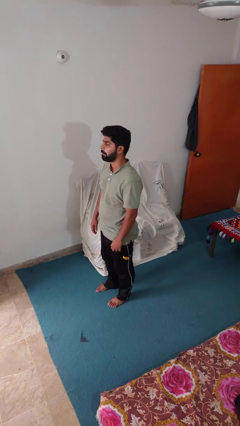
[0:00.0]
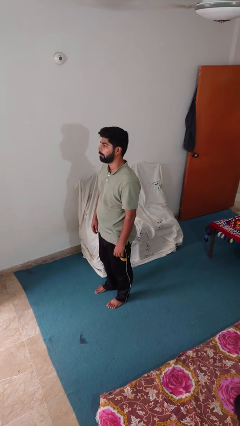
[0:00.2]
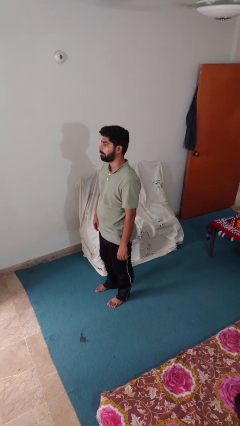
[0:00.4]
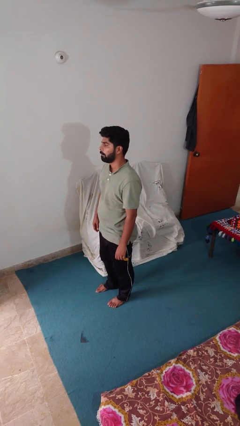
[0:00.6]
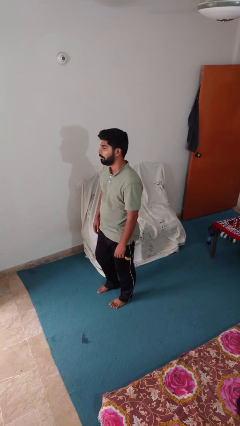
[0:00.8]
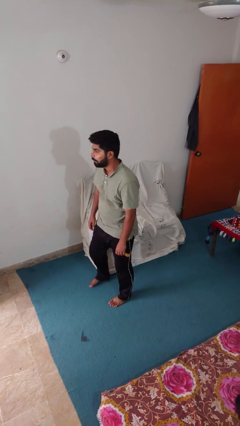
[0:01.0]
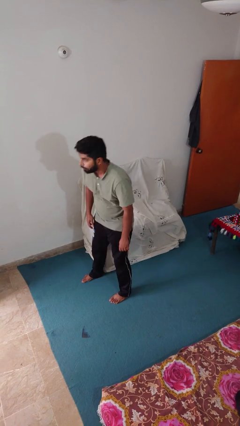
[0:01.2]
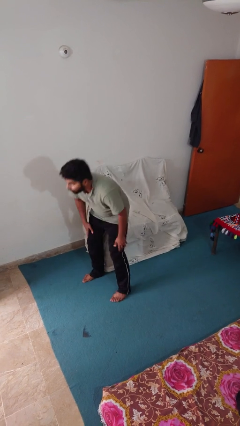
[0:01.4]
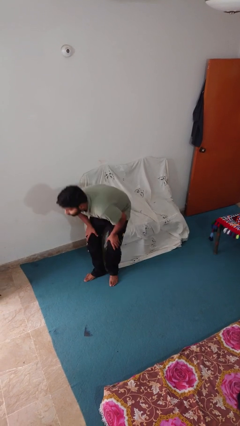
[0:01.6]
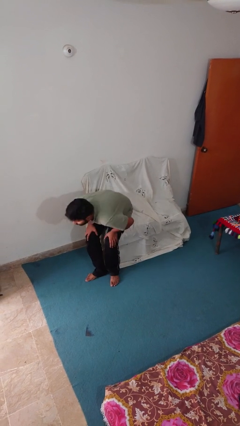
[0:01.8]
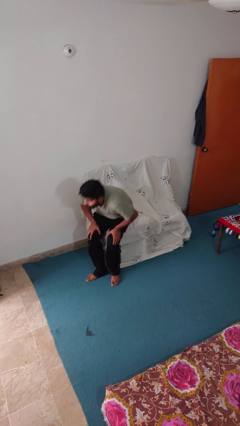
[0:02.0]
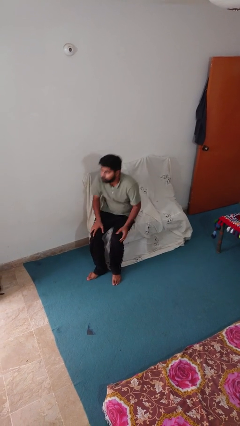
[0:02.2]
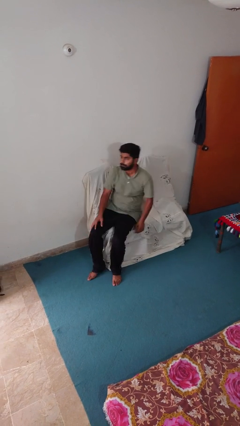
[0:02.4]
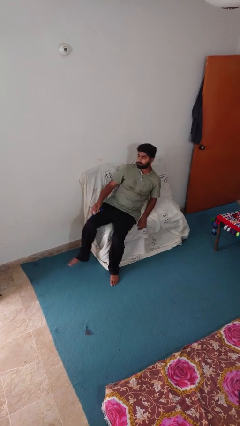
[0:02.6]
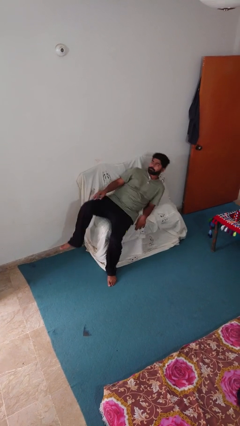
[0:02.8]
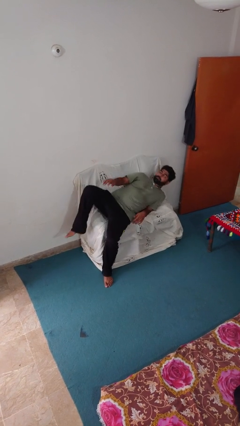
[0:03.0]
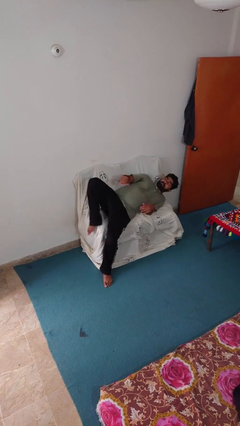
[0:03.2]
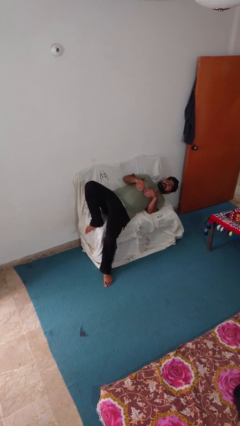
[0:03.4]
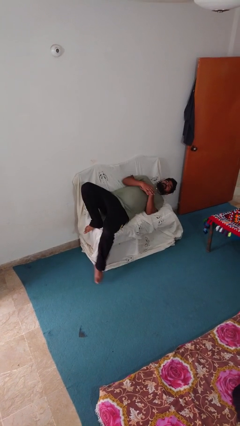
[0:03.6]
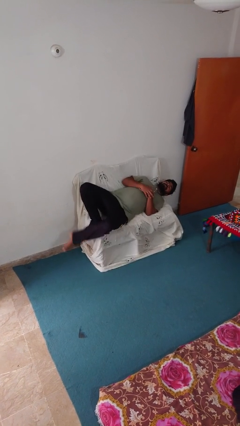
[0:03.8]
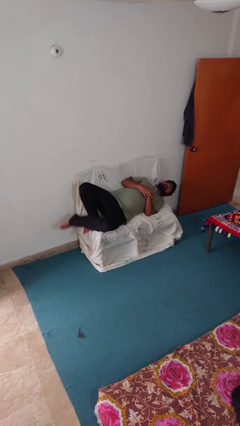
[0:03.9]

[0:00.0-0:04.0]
person lies down on couch

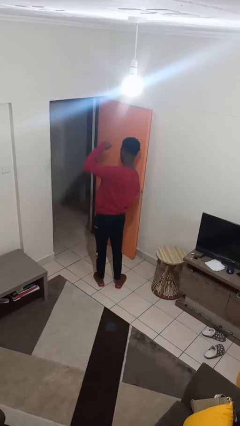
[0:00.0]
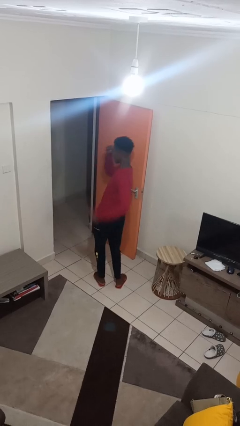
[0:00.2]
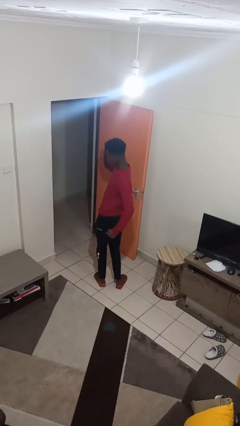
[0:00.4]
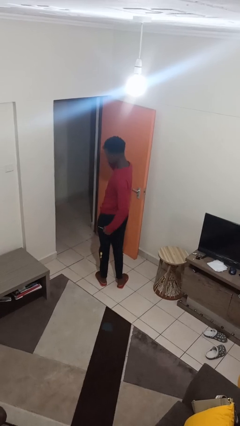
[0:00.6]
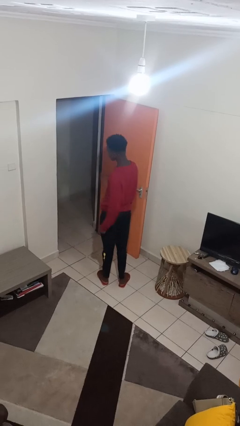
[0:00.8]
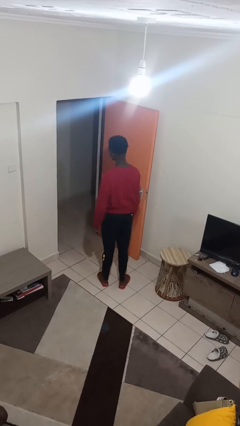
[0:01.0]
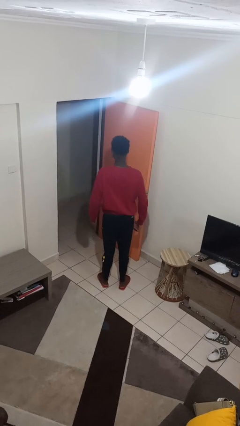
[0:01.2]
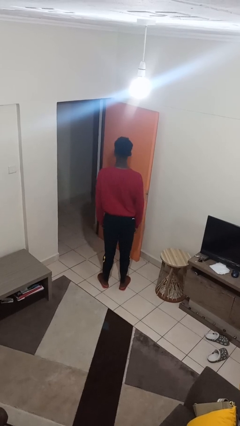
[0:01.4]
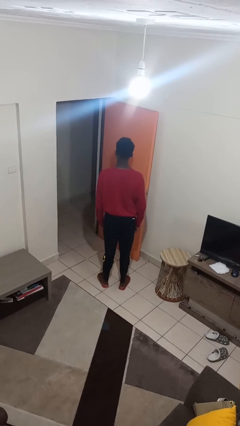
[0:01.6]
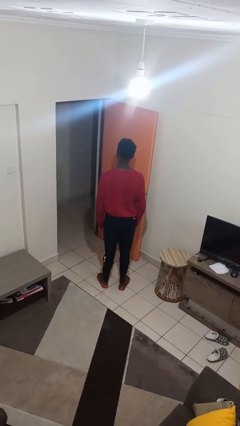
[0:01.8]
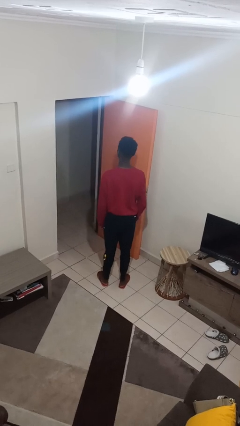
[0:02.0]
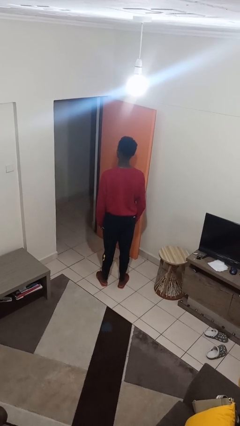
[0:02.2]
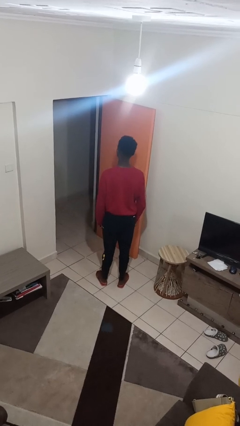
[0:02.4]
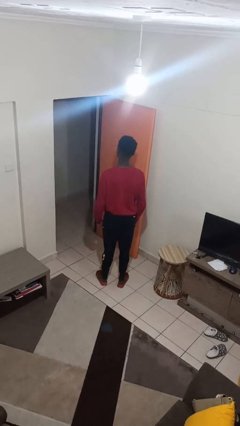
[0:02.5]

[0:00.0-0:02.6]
person punches

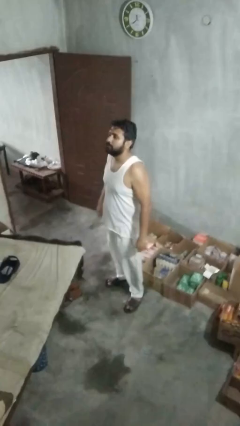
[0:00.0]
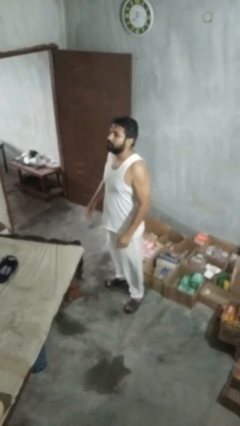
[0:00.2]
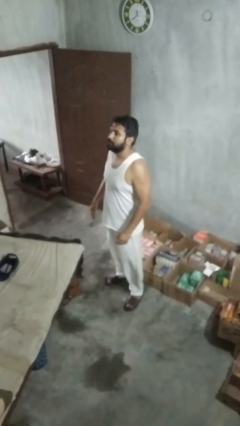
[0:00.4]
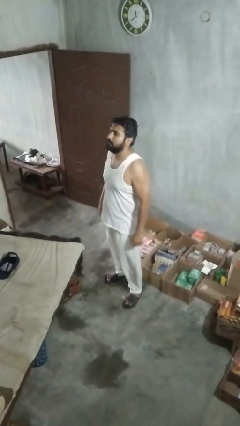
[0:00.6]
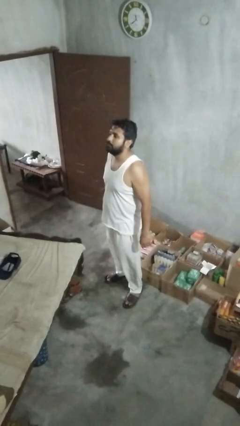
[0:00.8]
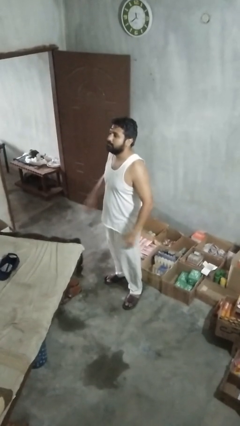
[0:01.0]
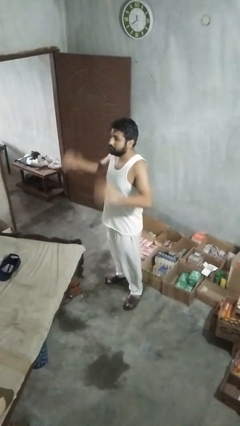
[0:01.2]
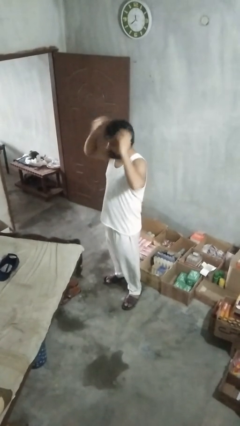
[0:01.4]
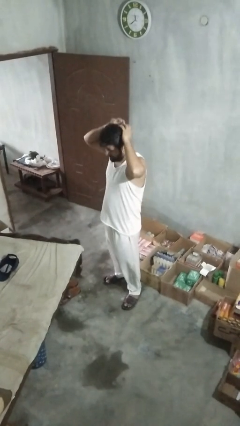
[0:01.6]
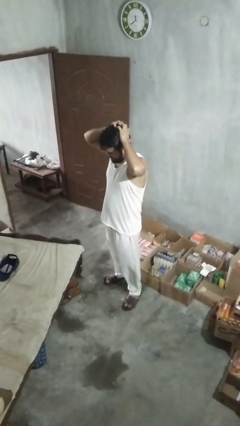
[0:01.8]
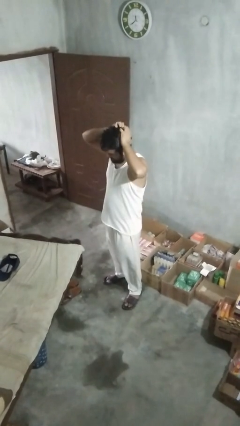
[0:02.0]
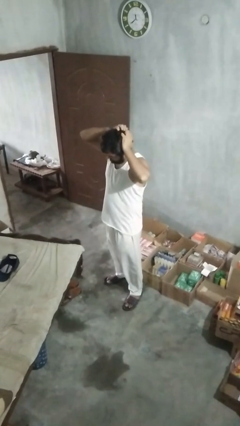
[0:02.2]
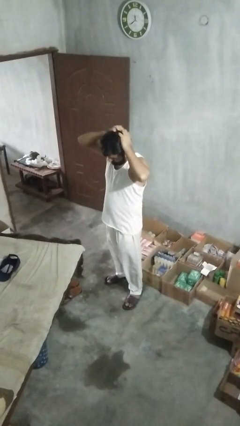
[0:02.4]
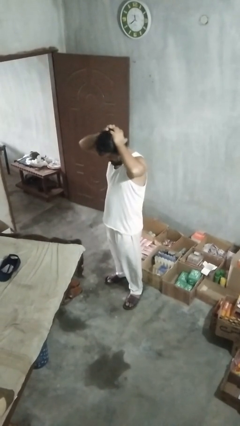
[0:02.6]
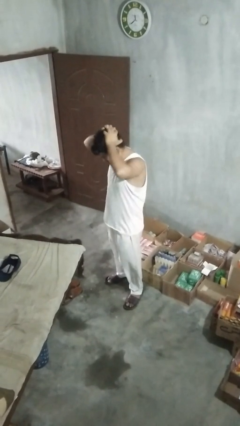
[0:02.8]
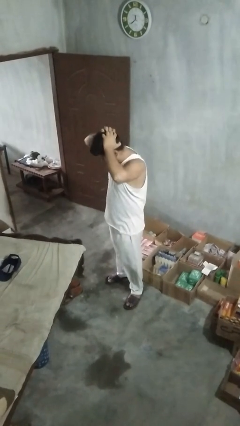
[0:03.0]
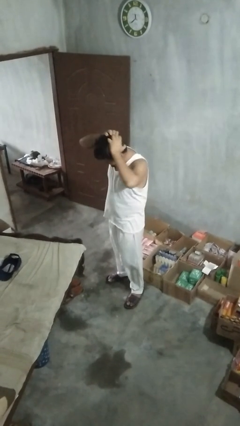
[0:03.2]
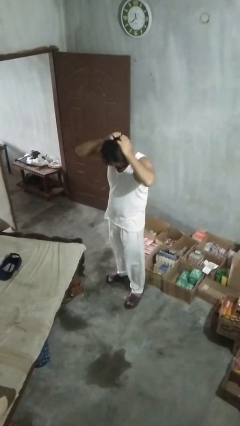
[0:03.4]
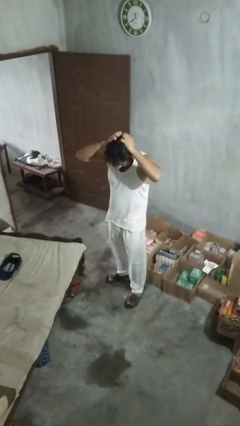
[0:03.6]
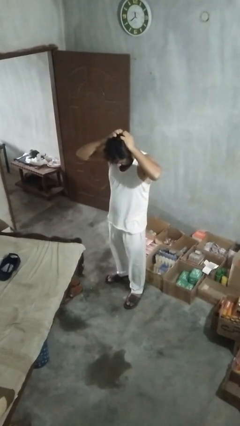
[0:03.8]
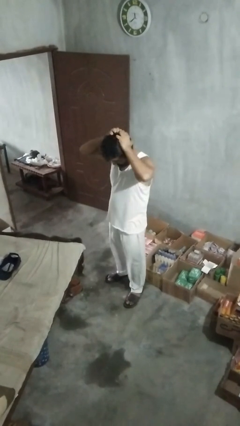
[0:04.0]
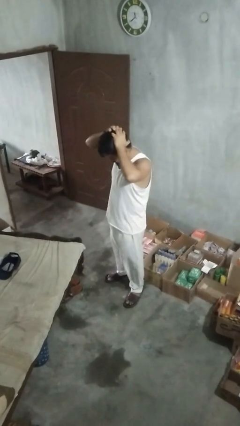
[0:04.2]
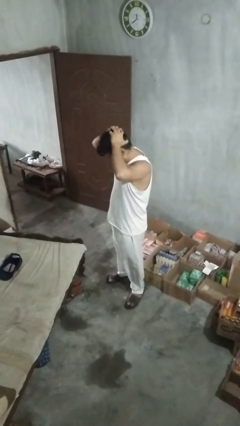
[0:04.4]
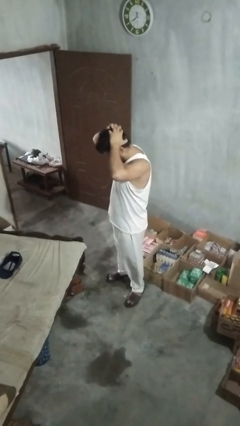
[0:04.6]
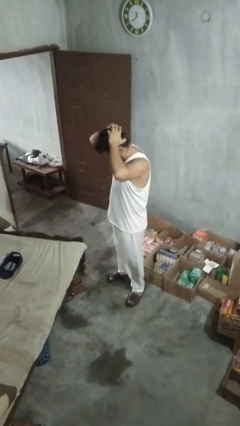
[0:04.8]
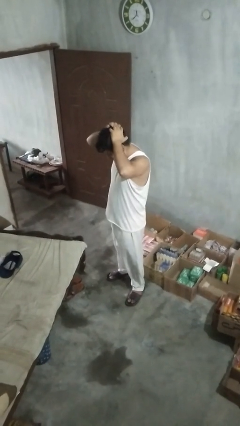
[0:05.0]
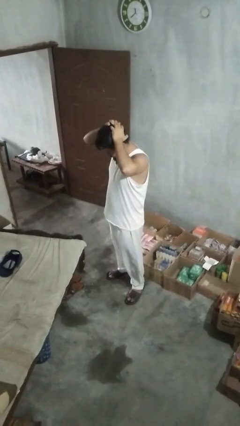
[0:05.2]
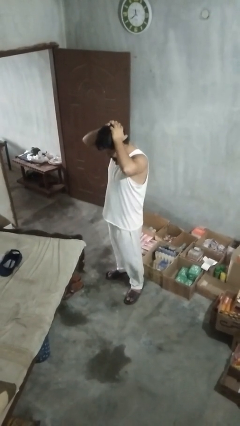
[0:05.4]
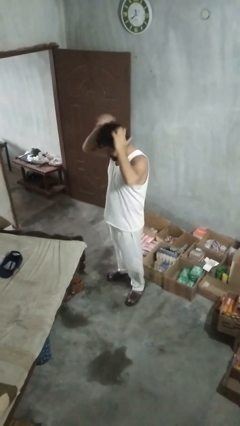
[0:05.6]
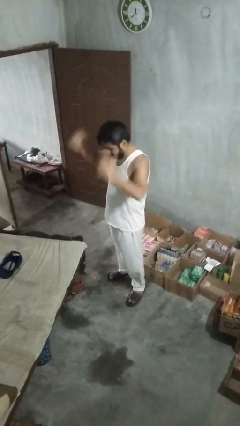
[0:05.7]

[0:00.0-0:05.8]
person scratches face

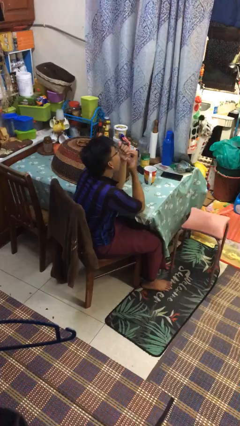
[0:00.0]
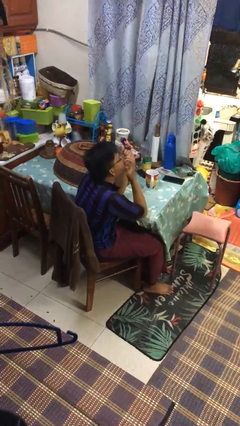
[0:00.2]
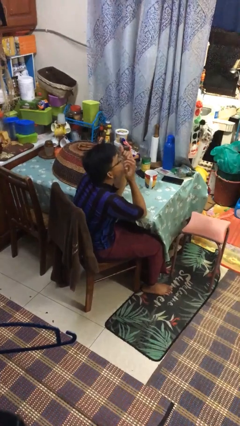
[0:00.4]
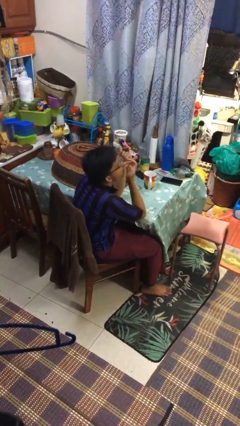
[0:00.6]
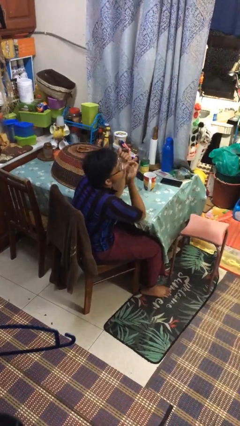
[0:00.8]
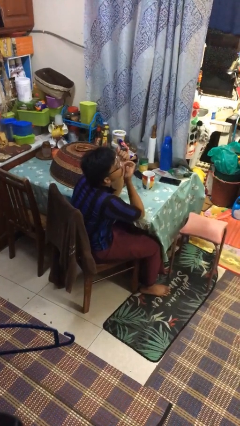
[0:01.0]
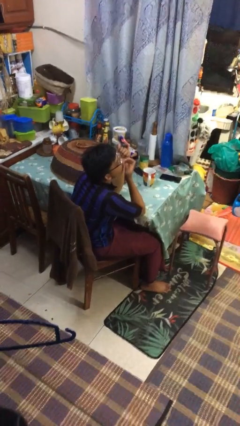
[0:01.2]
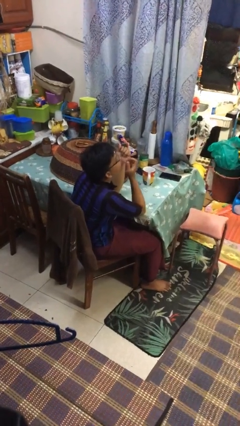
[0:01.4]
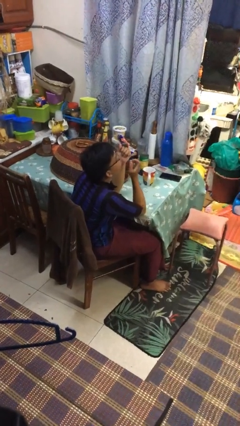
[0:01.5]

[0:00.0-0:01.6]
person licks fingers

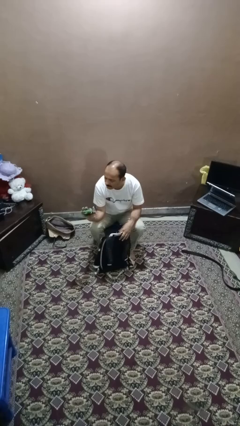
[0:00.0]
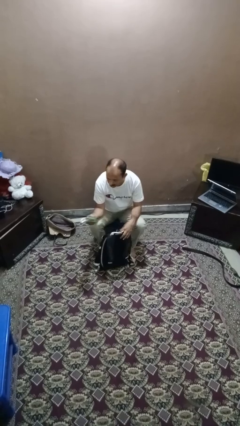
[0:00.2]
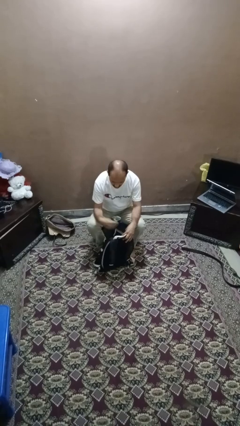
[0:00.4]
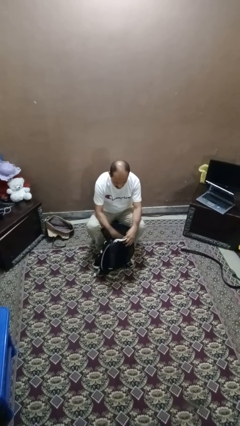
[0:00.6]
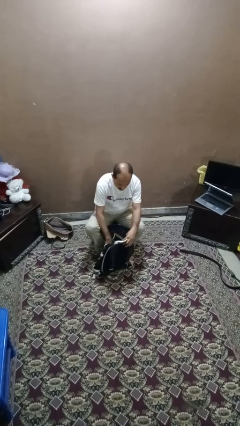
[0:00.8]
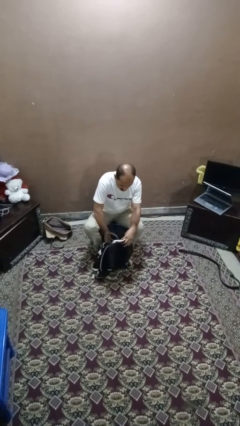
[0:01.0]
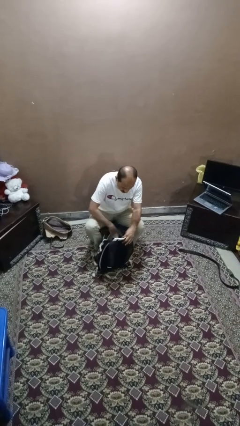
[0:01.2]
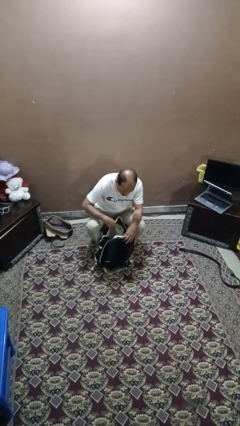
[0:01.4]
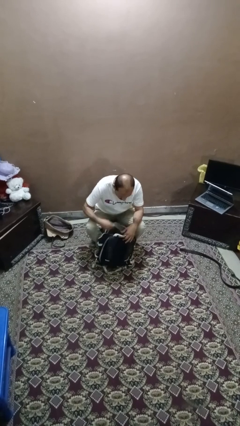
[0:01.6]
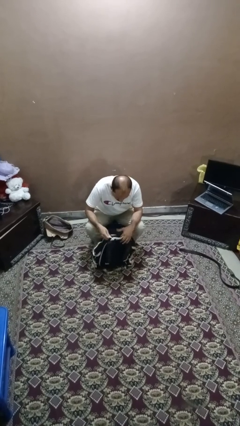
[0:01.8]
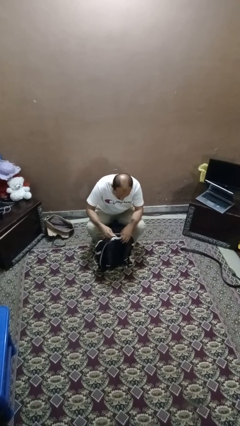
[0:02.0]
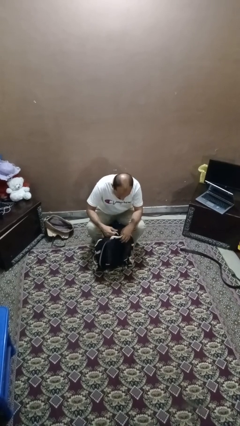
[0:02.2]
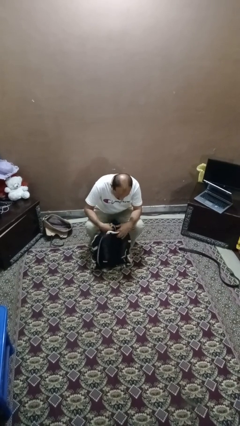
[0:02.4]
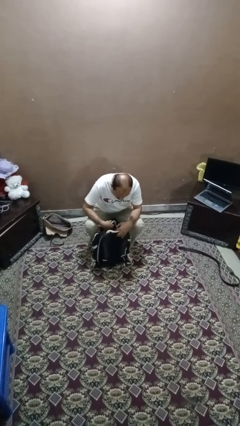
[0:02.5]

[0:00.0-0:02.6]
person puts object into backpack

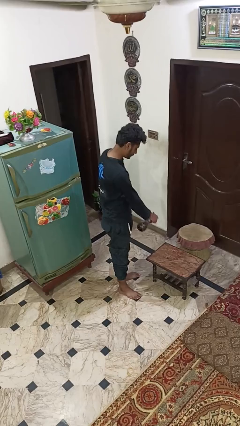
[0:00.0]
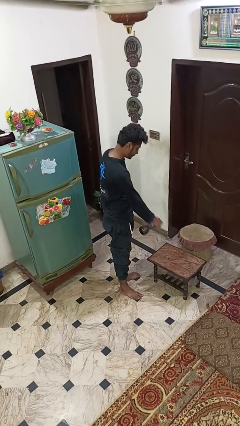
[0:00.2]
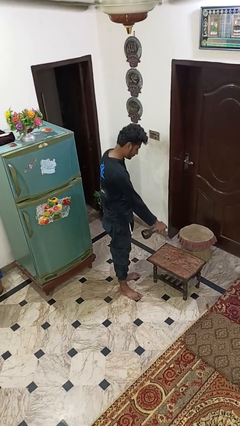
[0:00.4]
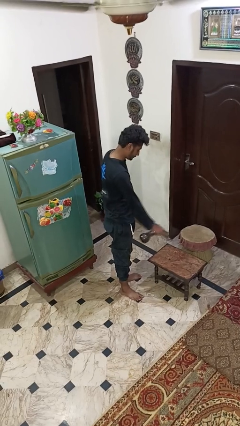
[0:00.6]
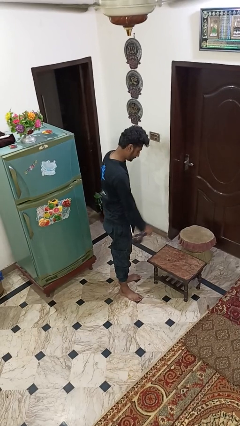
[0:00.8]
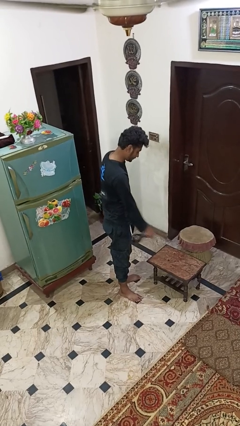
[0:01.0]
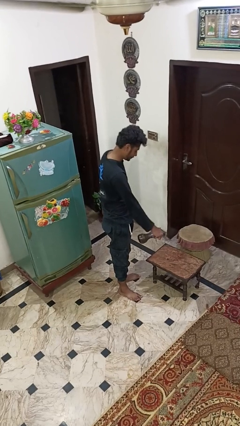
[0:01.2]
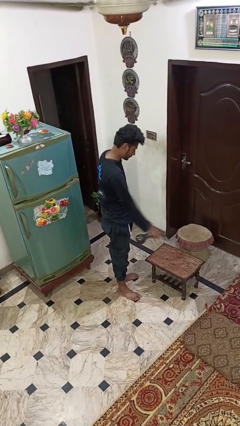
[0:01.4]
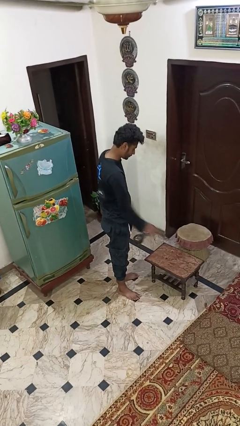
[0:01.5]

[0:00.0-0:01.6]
person sprays from bottle
